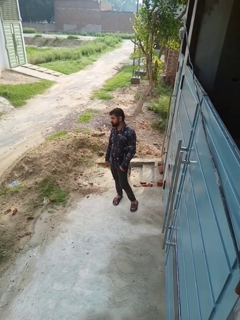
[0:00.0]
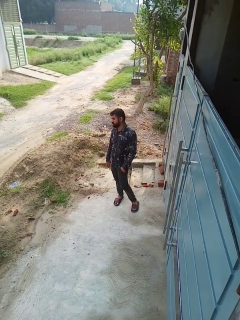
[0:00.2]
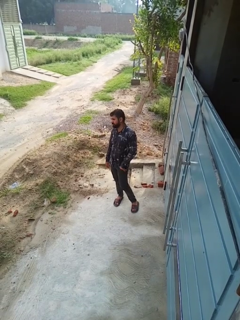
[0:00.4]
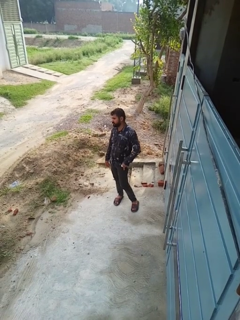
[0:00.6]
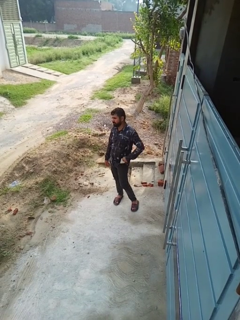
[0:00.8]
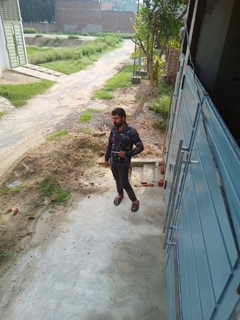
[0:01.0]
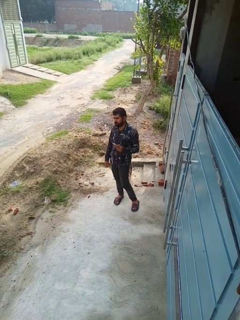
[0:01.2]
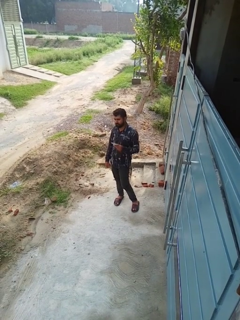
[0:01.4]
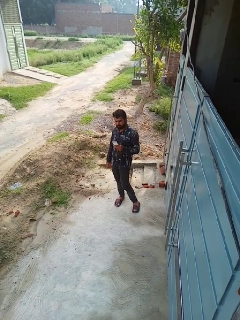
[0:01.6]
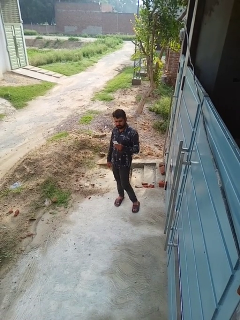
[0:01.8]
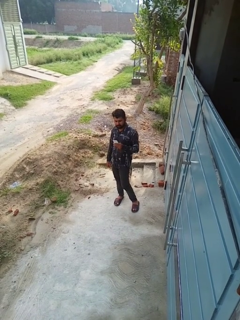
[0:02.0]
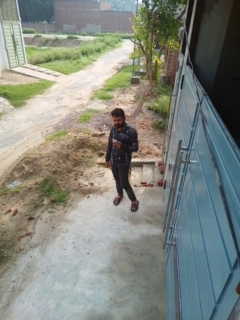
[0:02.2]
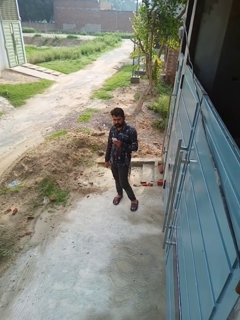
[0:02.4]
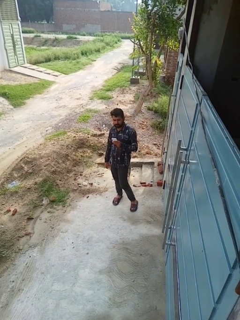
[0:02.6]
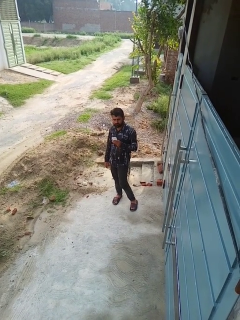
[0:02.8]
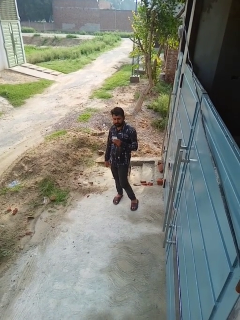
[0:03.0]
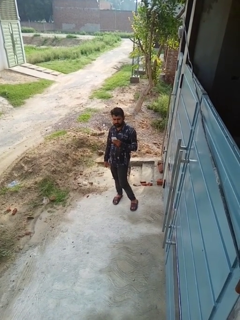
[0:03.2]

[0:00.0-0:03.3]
person takes phone from pocket

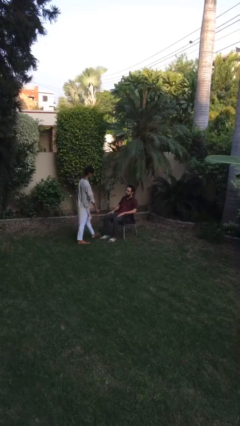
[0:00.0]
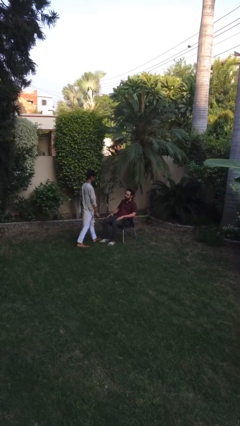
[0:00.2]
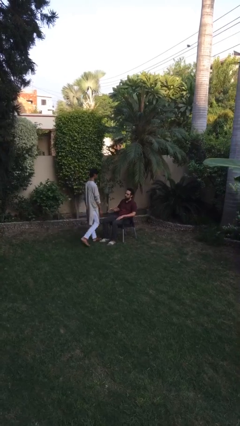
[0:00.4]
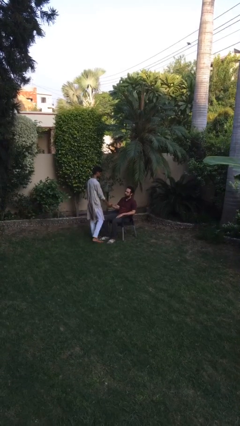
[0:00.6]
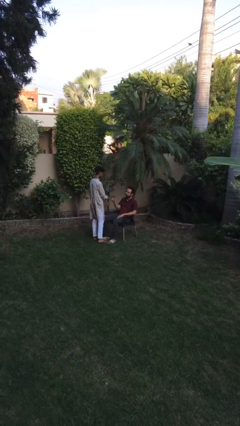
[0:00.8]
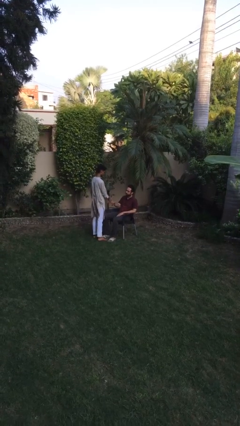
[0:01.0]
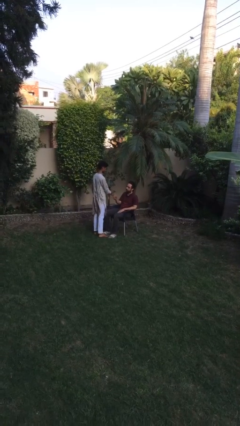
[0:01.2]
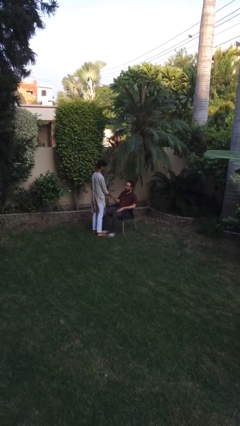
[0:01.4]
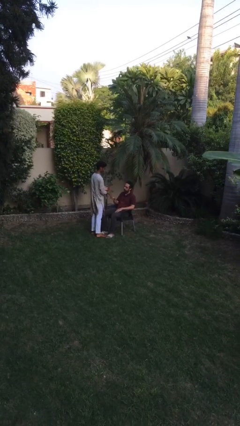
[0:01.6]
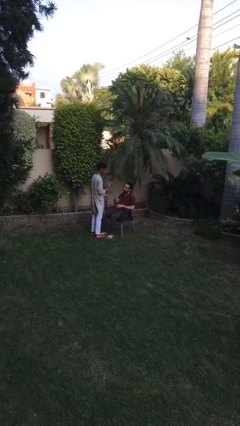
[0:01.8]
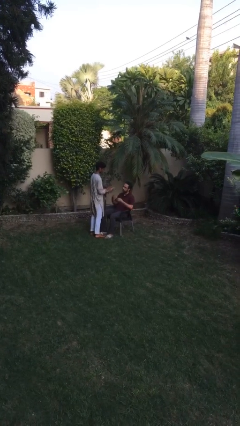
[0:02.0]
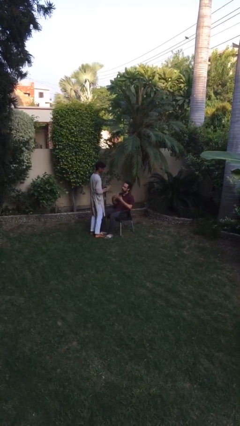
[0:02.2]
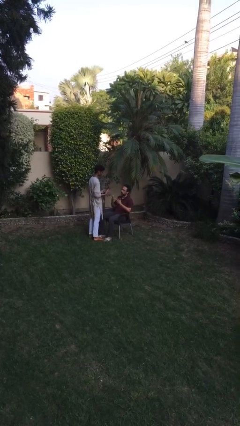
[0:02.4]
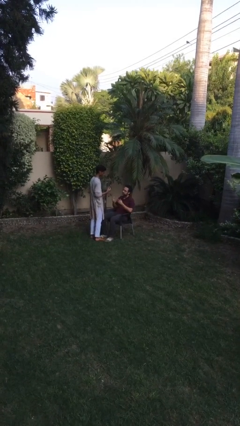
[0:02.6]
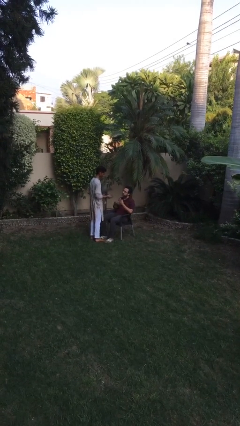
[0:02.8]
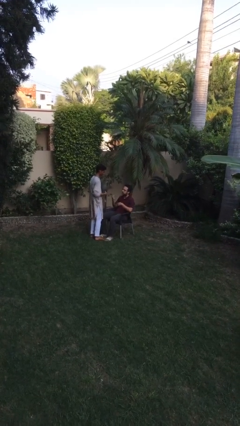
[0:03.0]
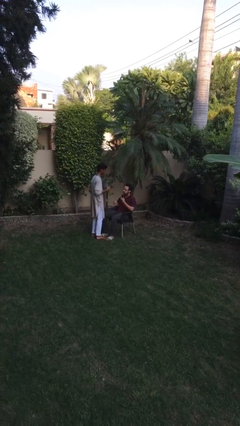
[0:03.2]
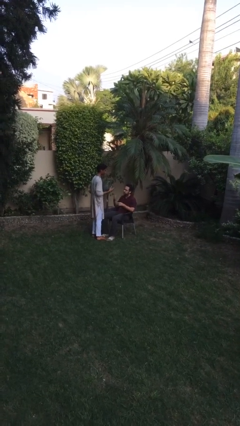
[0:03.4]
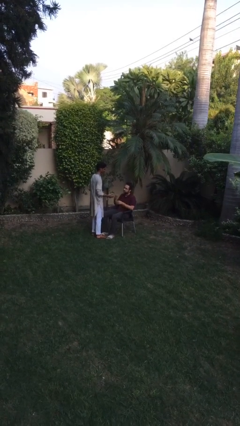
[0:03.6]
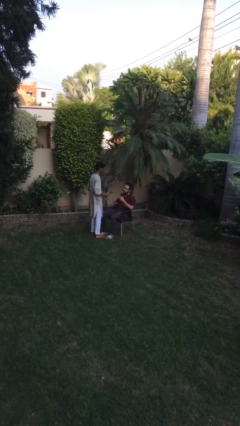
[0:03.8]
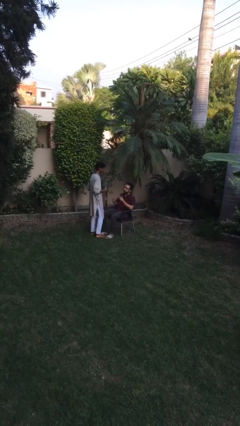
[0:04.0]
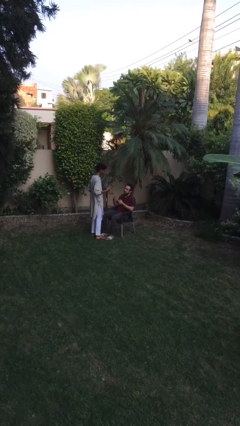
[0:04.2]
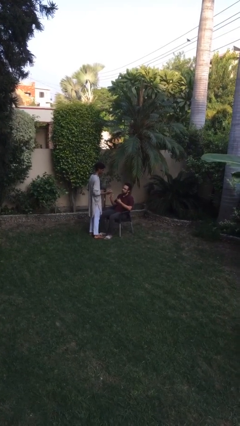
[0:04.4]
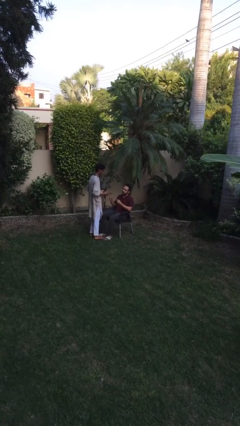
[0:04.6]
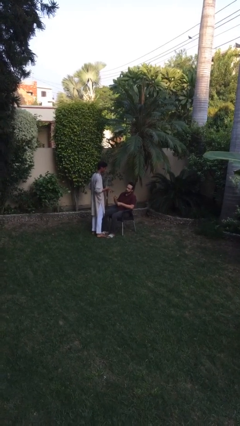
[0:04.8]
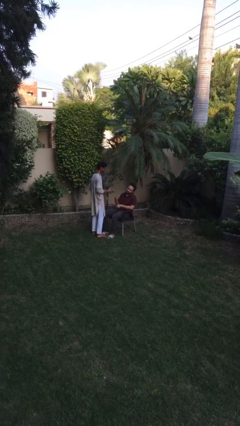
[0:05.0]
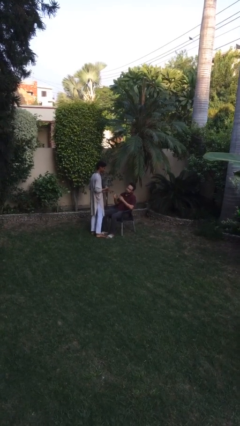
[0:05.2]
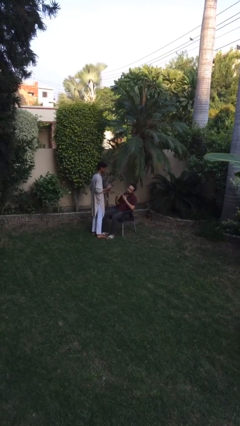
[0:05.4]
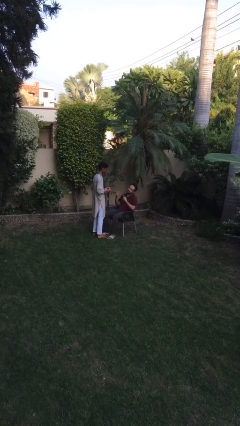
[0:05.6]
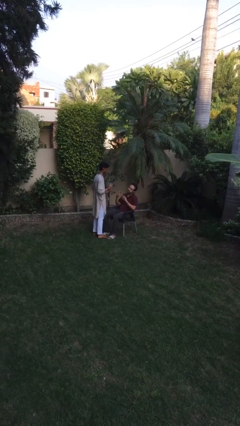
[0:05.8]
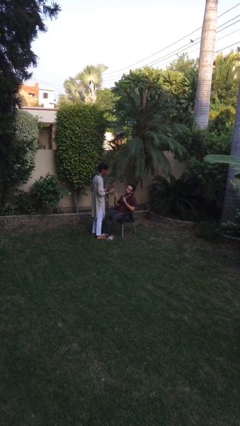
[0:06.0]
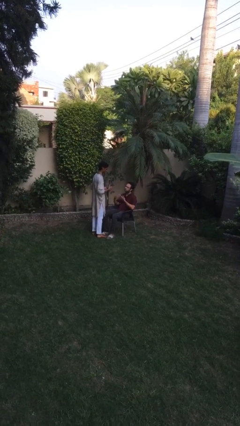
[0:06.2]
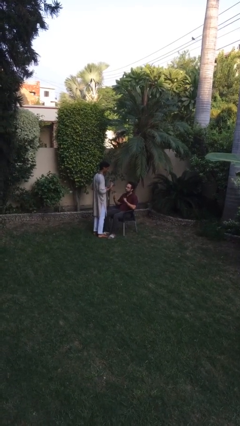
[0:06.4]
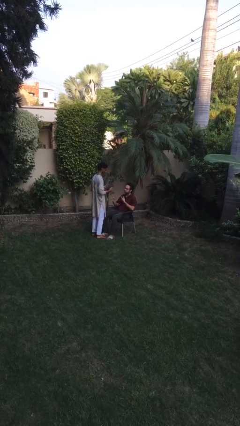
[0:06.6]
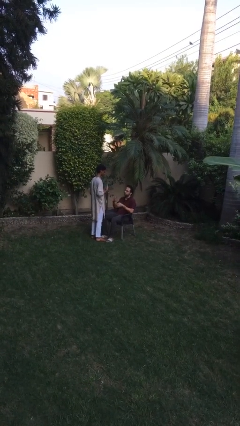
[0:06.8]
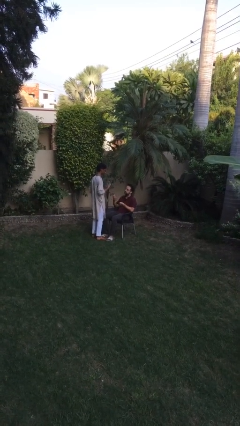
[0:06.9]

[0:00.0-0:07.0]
person shakes hand

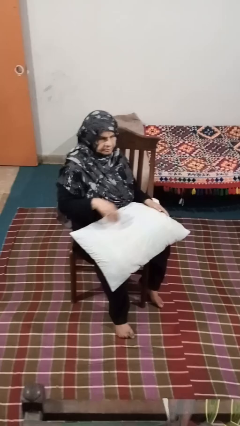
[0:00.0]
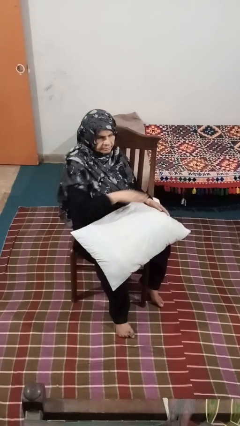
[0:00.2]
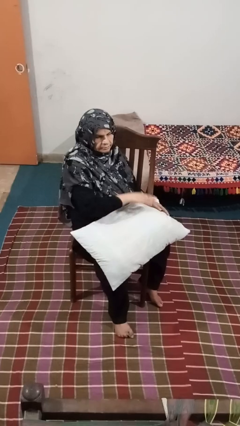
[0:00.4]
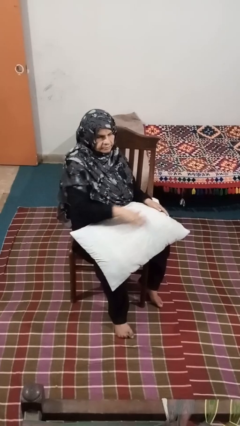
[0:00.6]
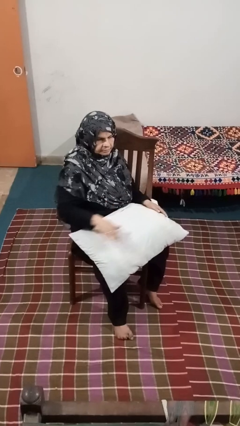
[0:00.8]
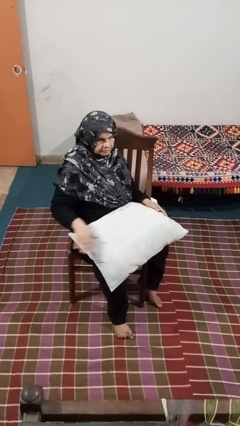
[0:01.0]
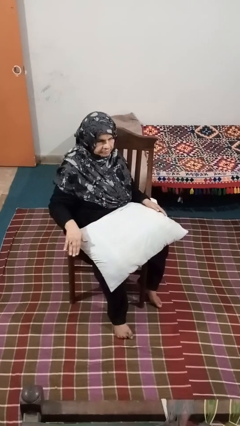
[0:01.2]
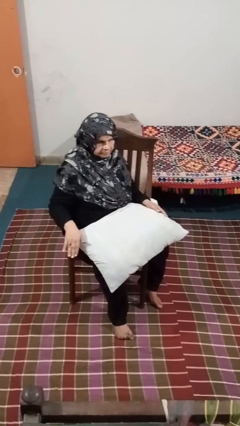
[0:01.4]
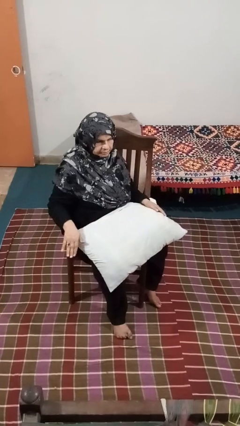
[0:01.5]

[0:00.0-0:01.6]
person waves hand over object

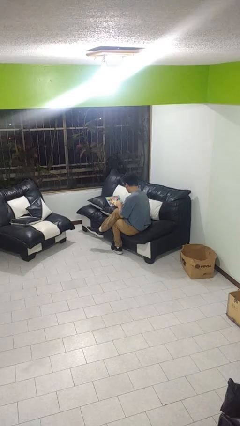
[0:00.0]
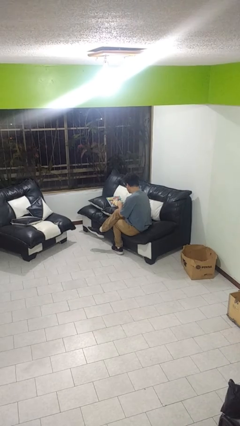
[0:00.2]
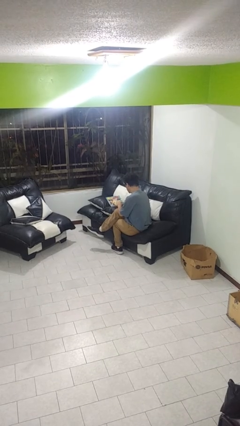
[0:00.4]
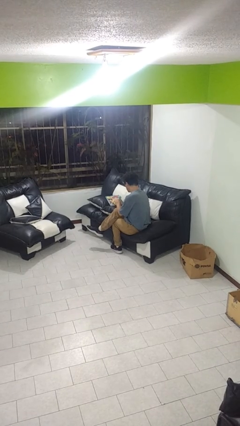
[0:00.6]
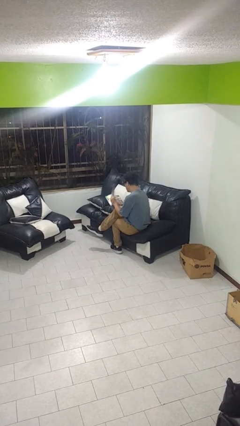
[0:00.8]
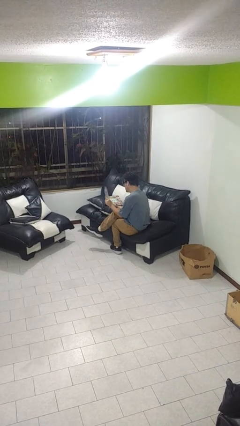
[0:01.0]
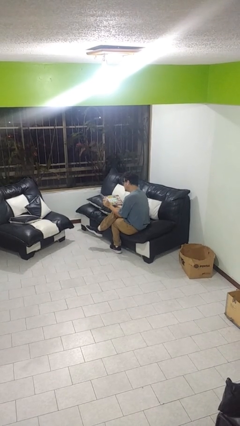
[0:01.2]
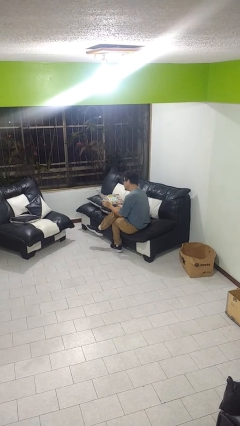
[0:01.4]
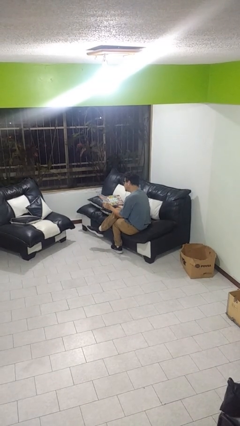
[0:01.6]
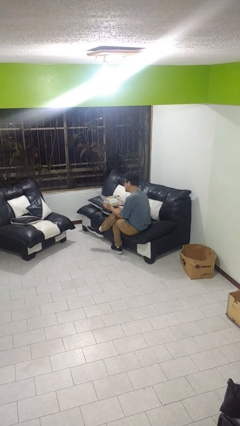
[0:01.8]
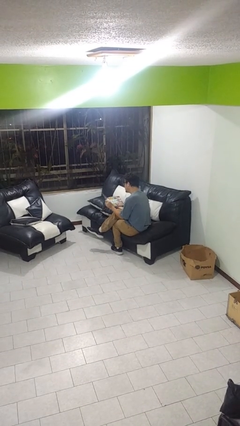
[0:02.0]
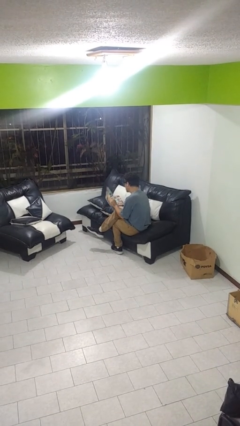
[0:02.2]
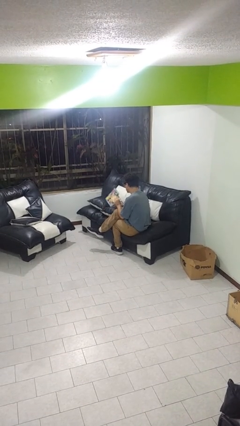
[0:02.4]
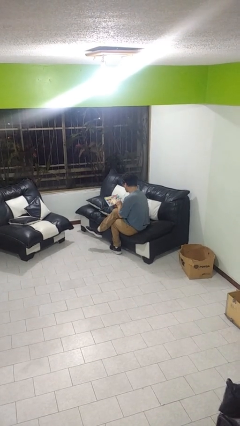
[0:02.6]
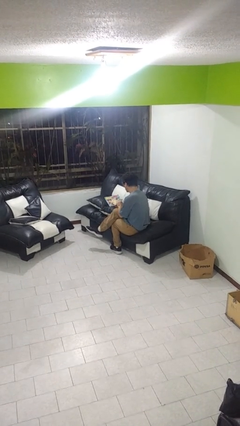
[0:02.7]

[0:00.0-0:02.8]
person reads magazine

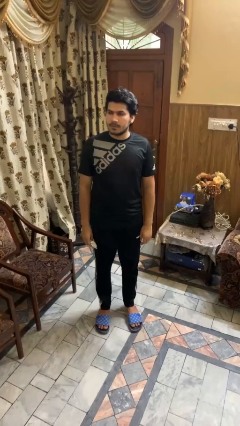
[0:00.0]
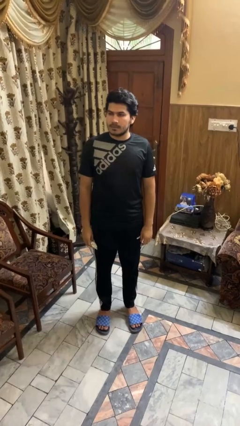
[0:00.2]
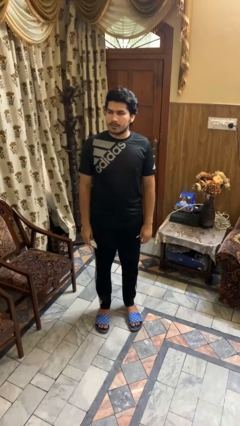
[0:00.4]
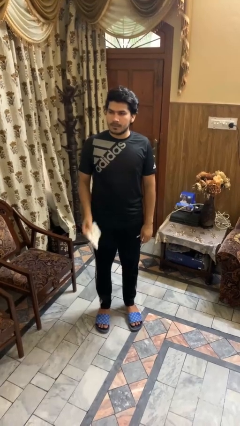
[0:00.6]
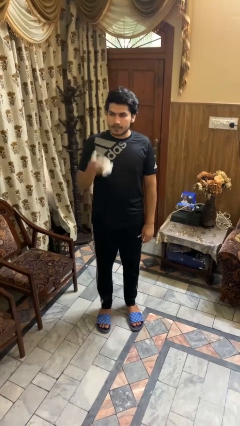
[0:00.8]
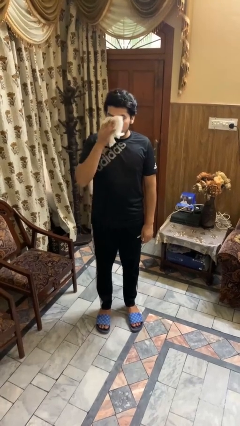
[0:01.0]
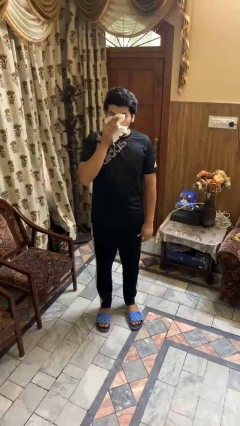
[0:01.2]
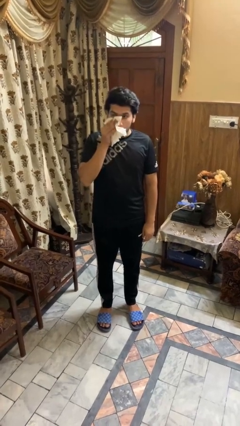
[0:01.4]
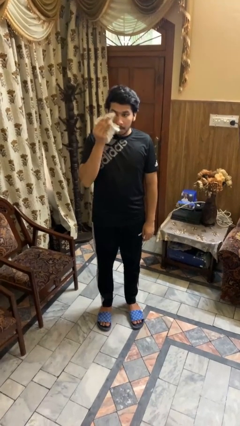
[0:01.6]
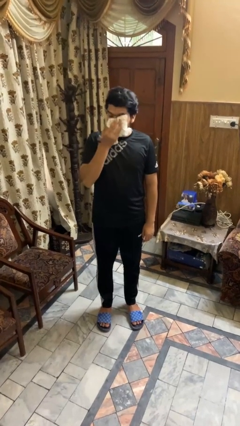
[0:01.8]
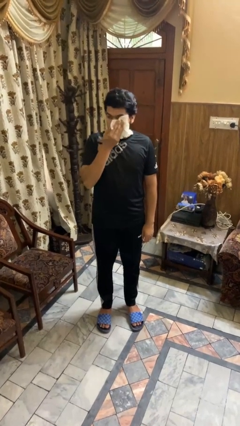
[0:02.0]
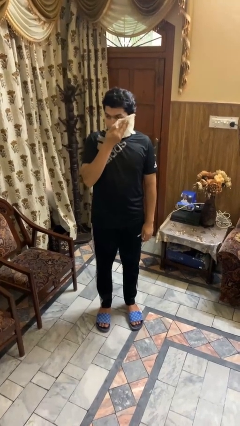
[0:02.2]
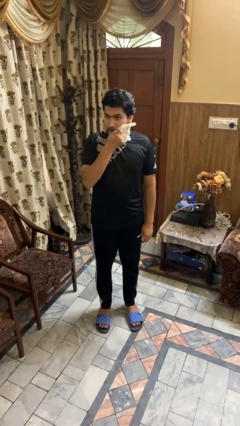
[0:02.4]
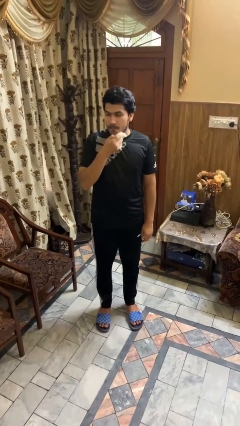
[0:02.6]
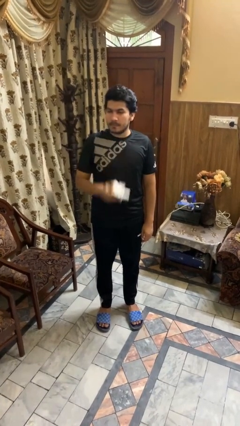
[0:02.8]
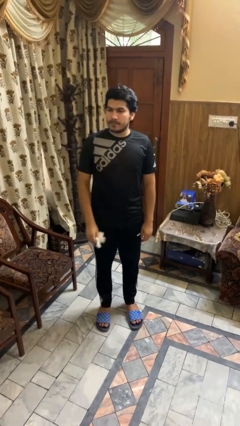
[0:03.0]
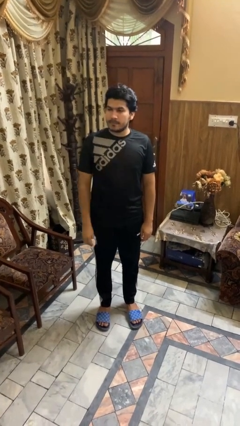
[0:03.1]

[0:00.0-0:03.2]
person wipes mouth with napkin

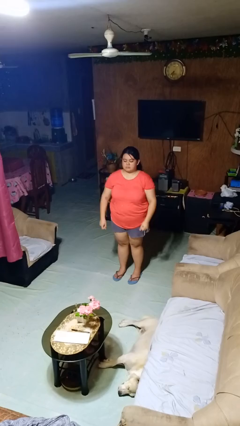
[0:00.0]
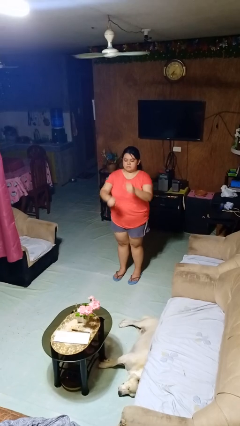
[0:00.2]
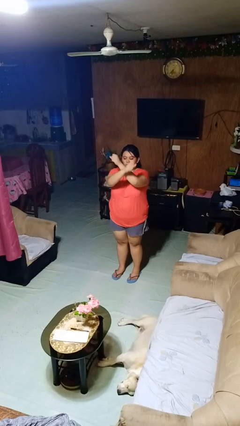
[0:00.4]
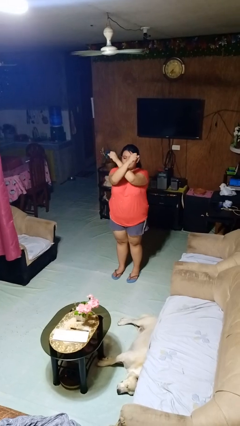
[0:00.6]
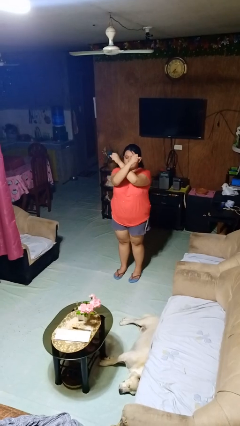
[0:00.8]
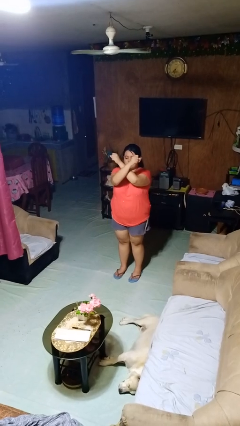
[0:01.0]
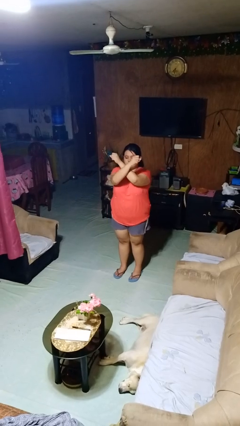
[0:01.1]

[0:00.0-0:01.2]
person gestures arms x
